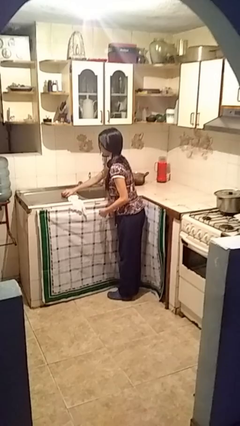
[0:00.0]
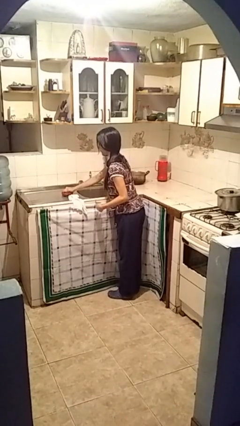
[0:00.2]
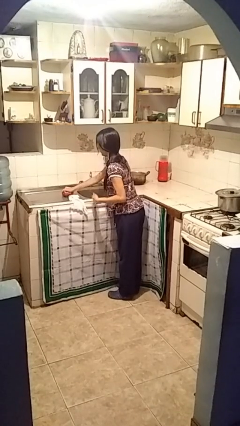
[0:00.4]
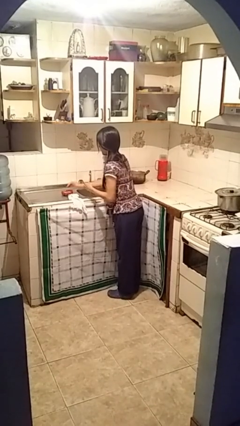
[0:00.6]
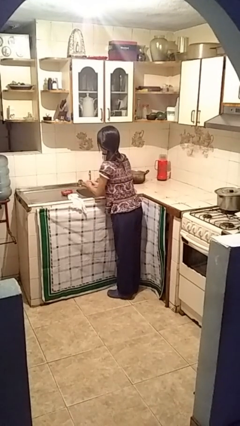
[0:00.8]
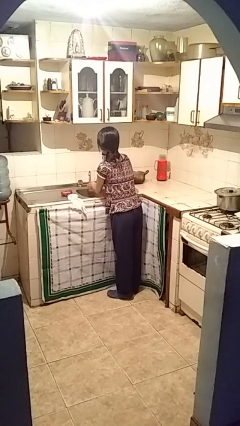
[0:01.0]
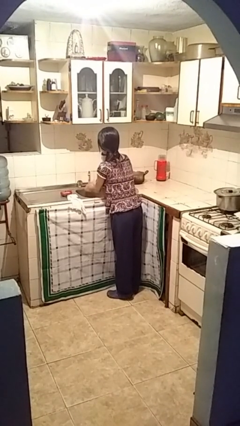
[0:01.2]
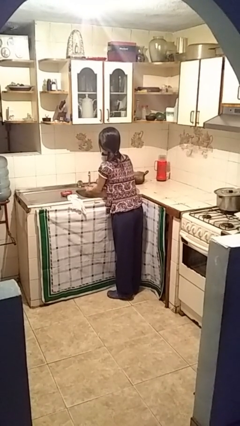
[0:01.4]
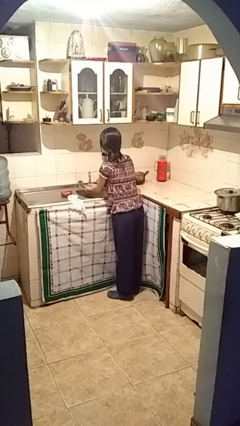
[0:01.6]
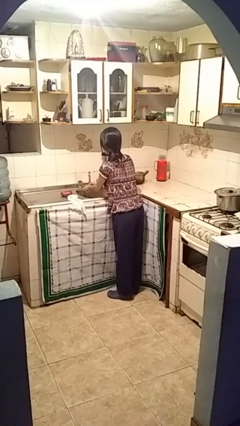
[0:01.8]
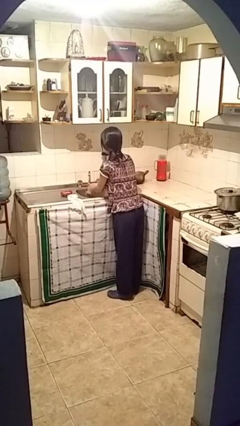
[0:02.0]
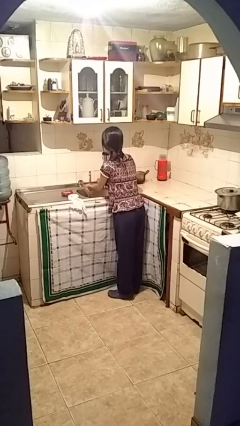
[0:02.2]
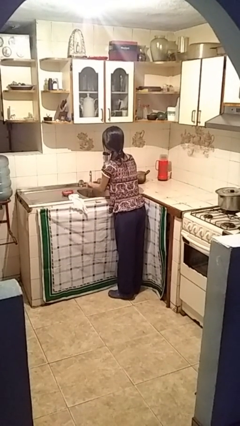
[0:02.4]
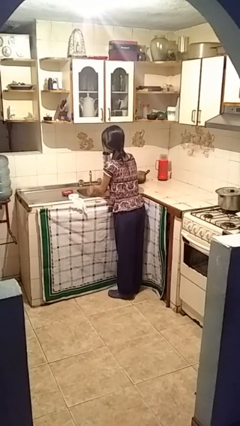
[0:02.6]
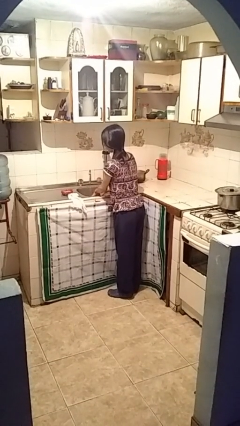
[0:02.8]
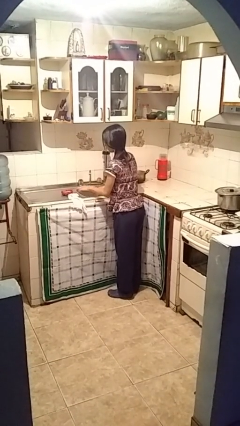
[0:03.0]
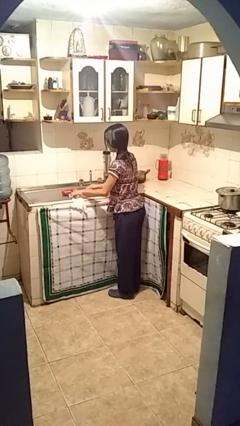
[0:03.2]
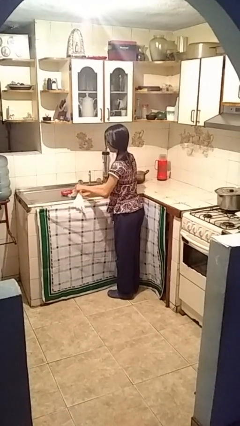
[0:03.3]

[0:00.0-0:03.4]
person washes hands

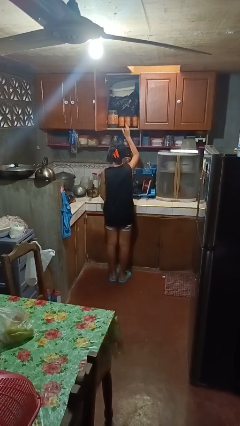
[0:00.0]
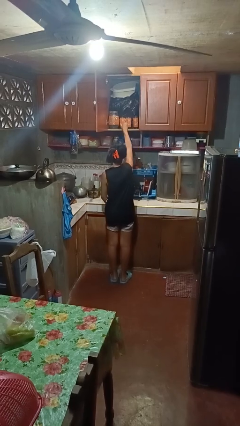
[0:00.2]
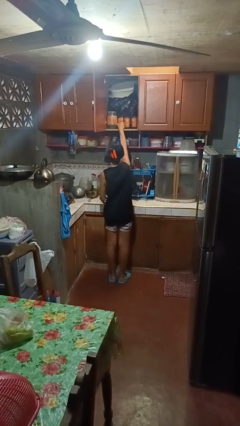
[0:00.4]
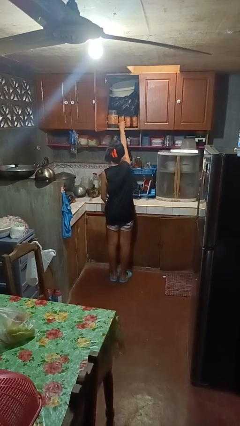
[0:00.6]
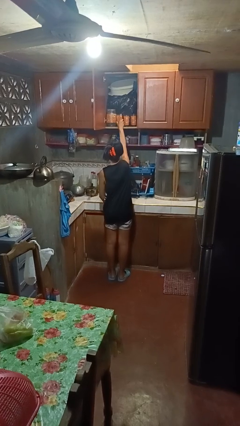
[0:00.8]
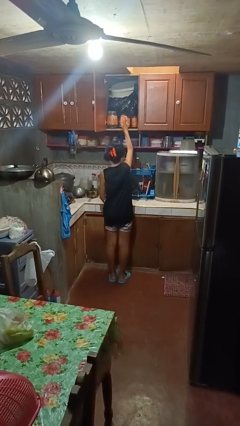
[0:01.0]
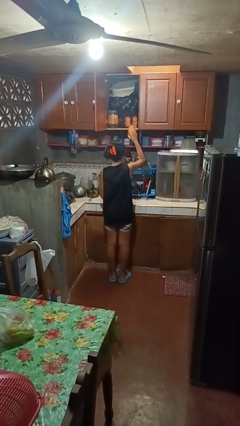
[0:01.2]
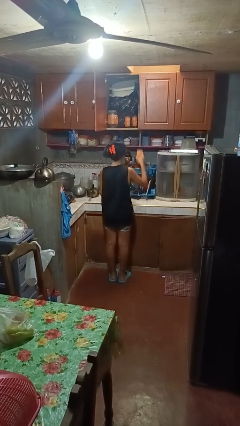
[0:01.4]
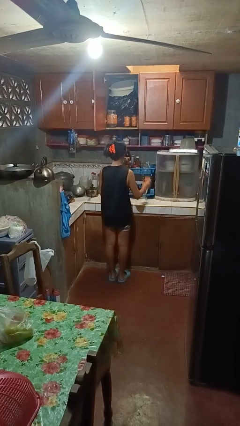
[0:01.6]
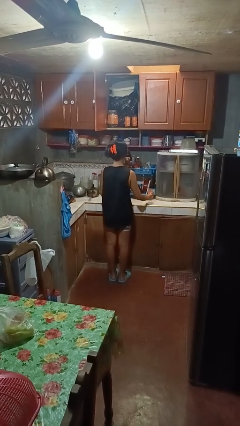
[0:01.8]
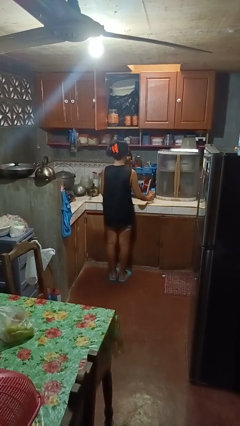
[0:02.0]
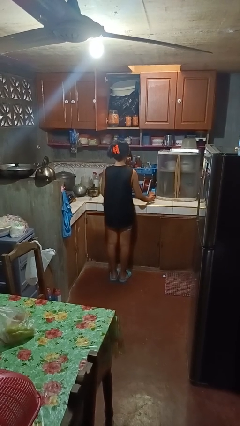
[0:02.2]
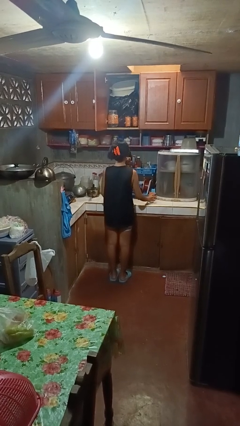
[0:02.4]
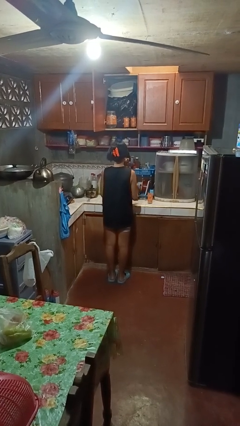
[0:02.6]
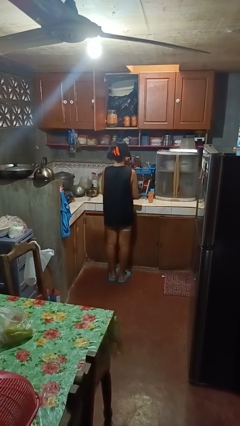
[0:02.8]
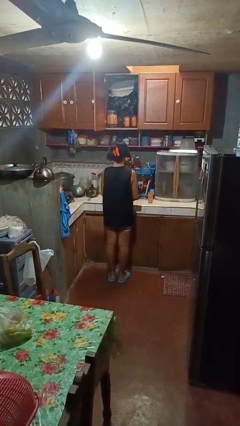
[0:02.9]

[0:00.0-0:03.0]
person takes object from cabinet

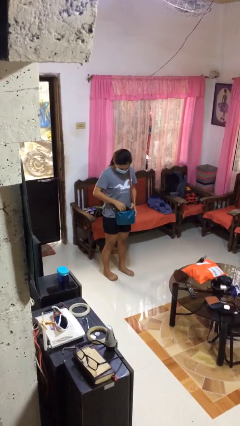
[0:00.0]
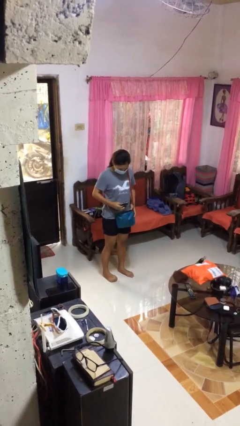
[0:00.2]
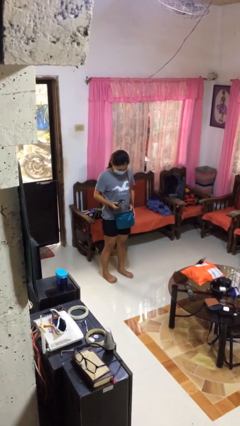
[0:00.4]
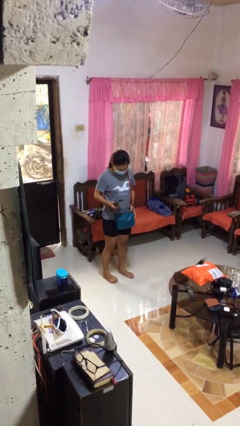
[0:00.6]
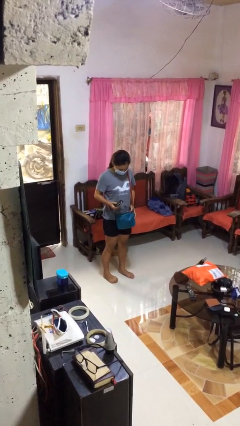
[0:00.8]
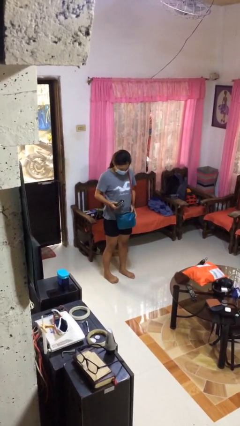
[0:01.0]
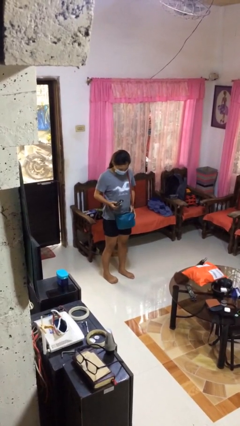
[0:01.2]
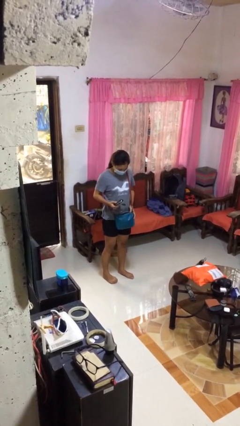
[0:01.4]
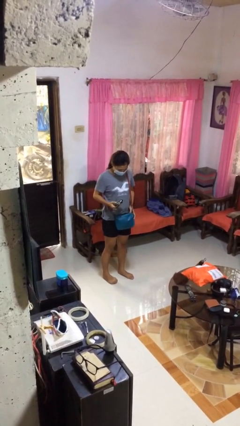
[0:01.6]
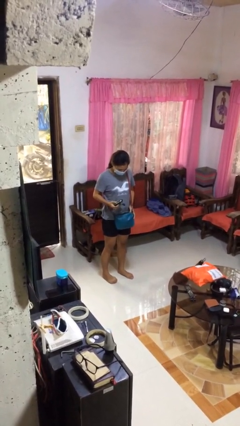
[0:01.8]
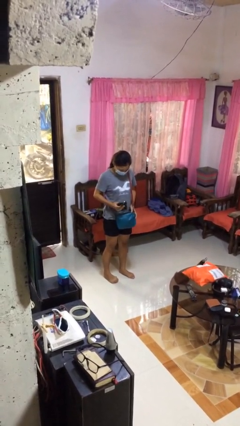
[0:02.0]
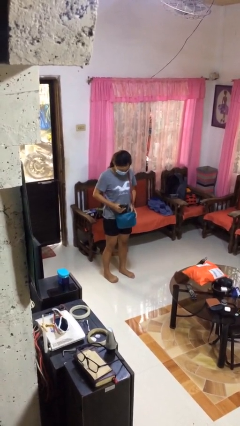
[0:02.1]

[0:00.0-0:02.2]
person takes object from purse

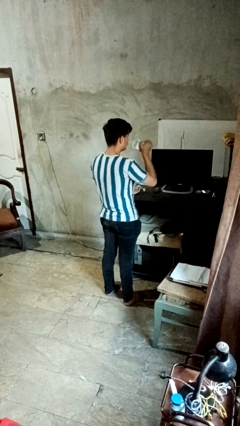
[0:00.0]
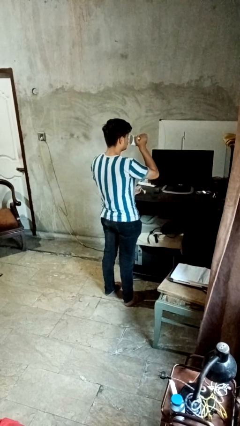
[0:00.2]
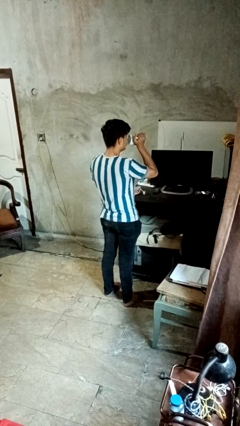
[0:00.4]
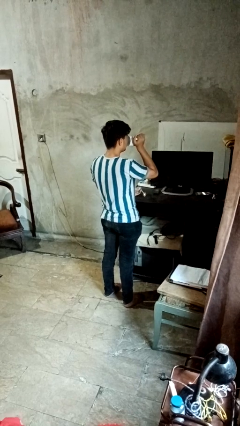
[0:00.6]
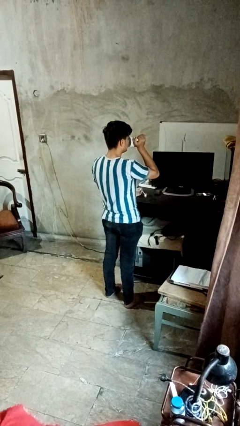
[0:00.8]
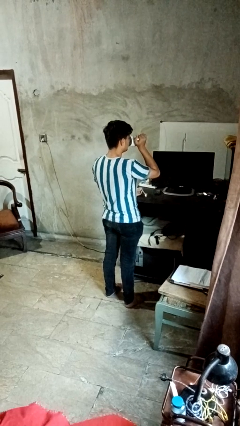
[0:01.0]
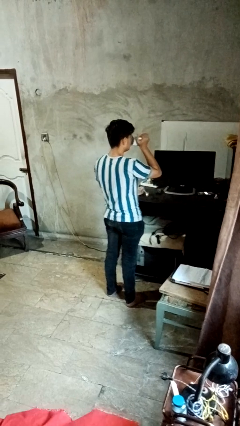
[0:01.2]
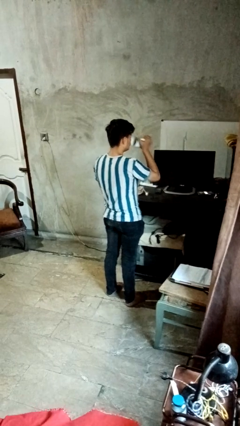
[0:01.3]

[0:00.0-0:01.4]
person drinks from mug

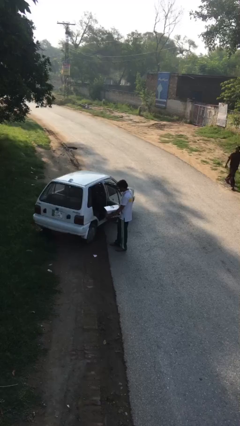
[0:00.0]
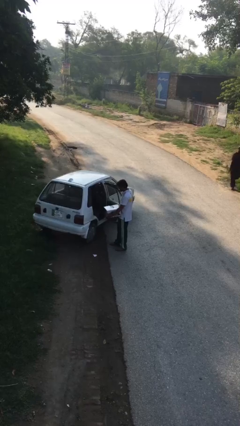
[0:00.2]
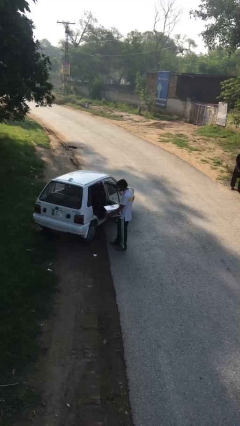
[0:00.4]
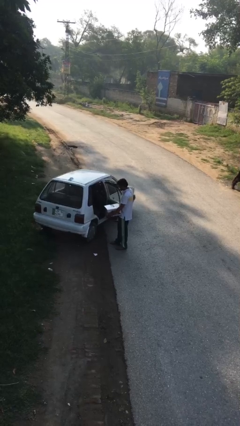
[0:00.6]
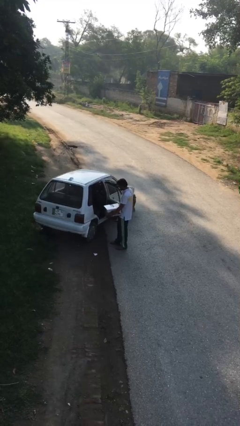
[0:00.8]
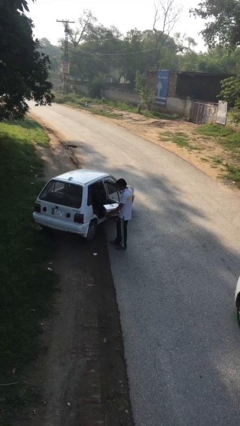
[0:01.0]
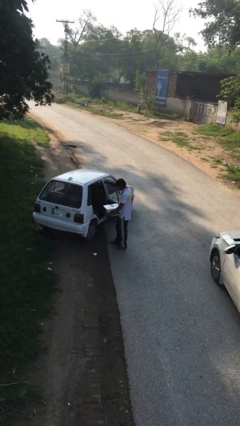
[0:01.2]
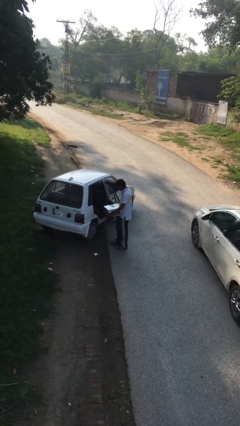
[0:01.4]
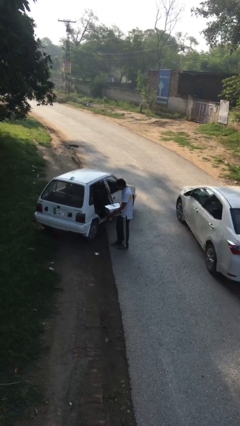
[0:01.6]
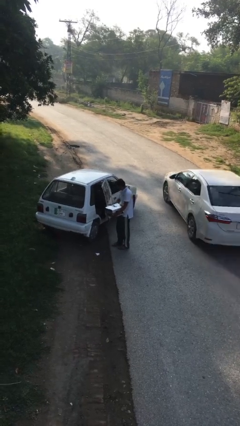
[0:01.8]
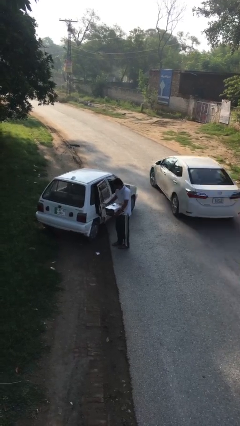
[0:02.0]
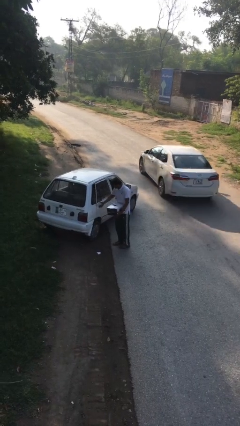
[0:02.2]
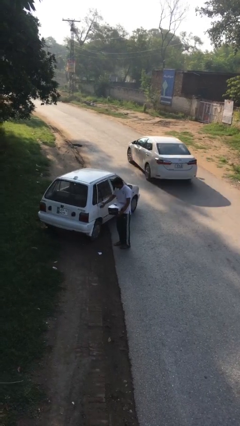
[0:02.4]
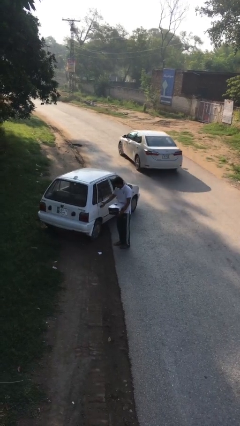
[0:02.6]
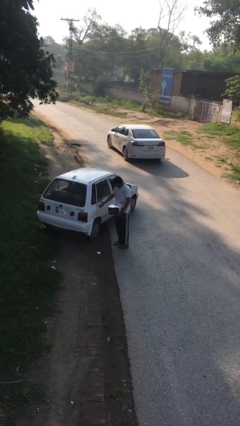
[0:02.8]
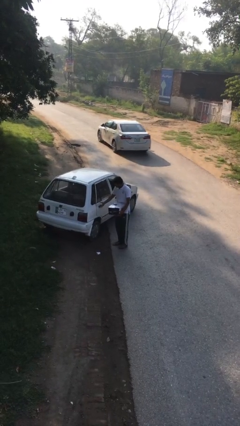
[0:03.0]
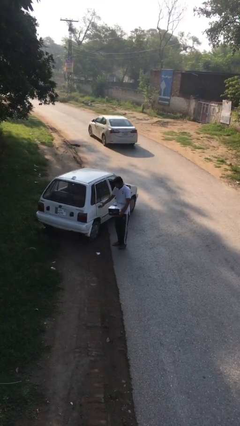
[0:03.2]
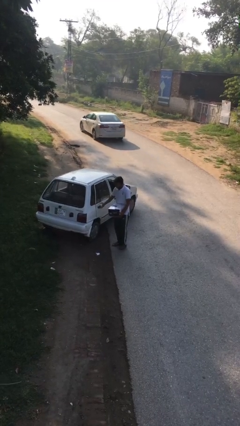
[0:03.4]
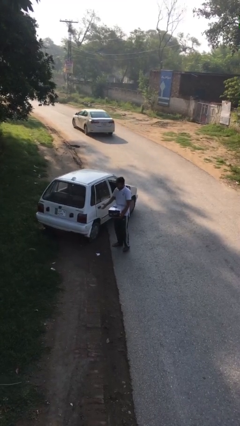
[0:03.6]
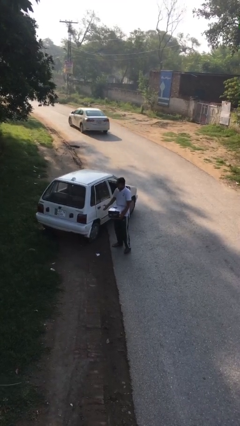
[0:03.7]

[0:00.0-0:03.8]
person closes car door

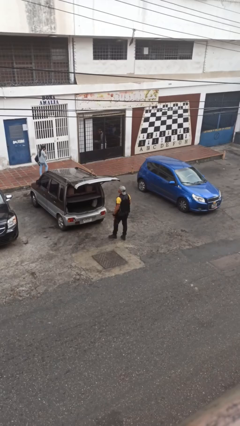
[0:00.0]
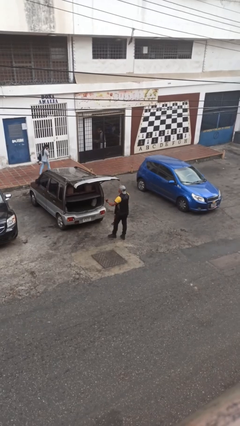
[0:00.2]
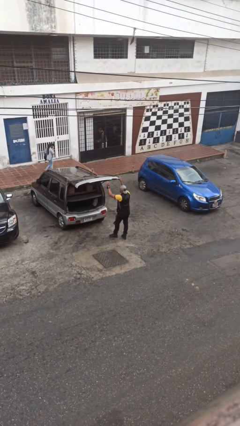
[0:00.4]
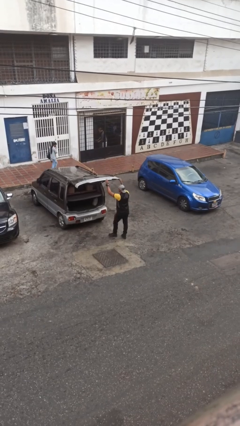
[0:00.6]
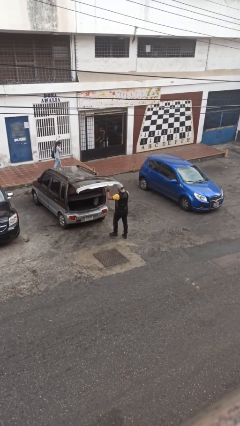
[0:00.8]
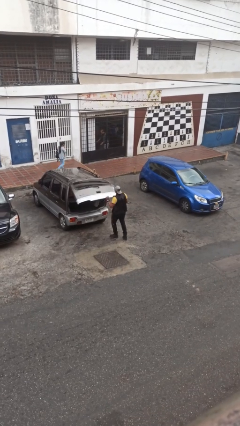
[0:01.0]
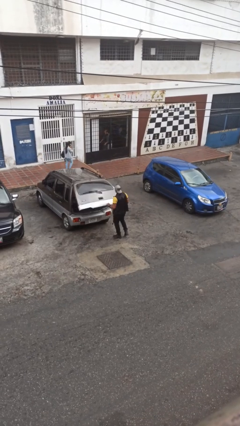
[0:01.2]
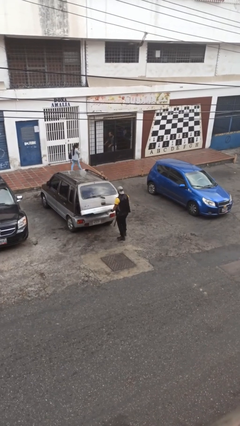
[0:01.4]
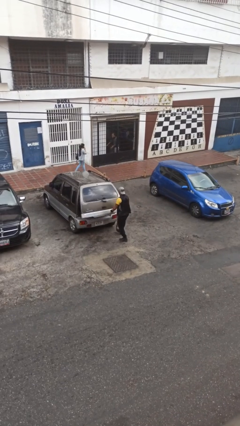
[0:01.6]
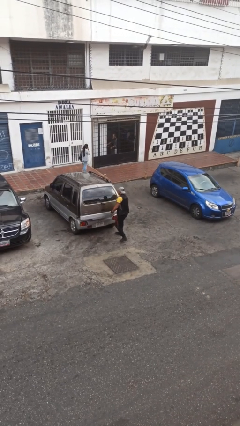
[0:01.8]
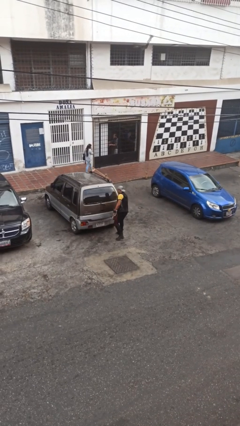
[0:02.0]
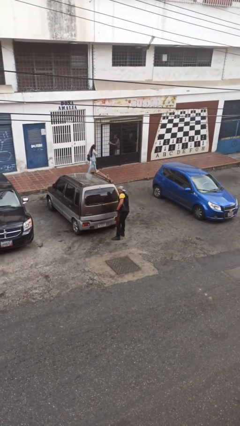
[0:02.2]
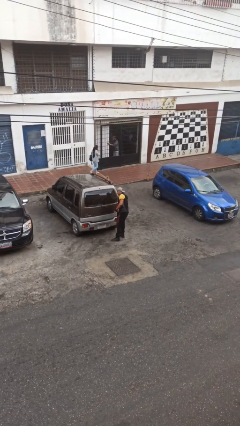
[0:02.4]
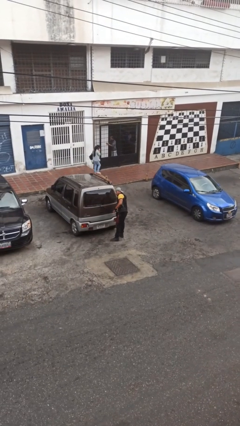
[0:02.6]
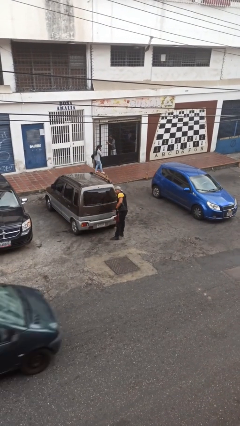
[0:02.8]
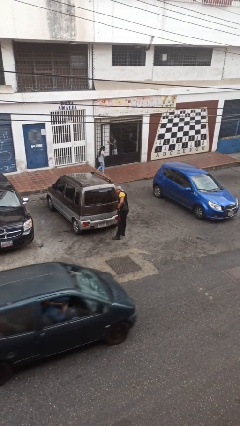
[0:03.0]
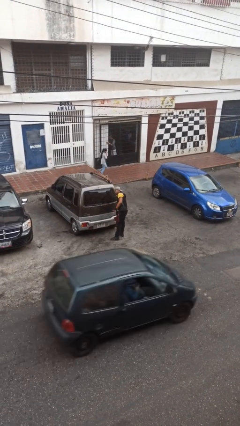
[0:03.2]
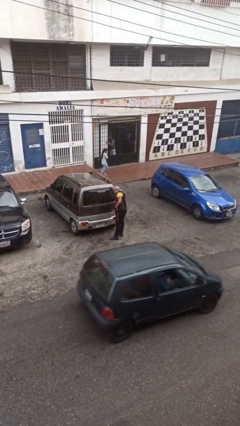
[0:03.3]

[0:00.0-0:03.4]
person closes car trunk

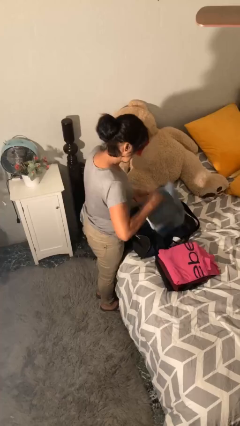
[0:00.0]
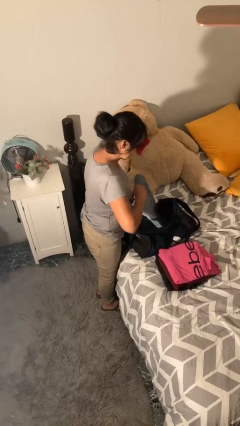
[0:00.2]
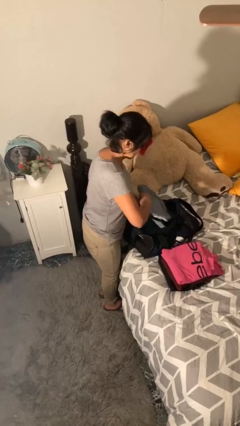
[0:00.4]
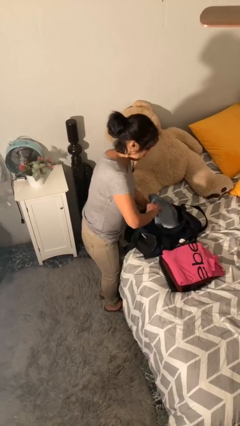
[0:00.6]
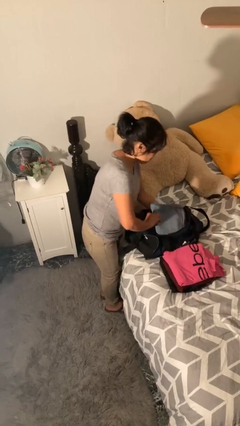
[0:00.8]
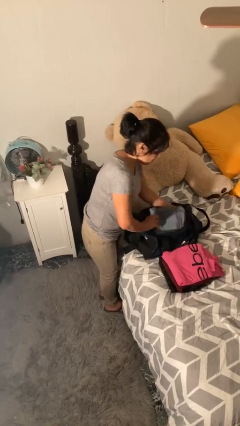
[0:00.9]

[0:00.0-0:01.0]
person loads clothes into suitcase
